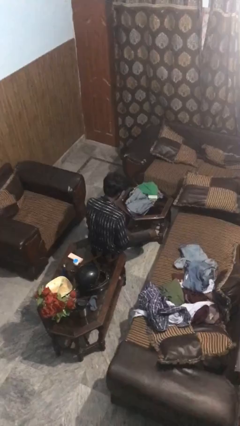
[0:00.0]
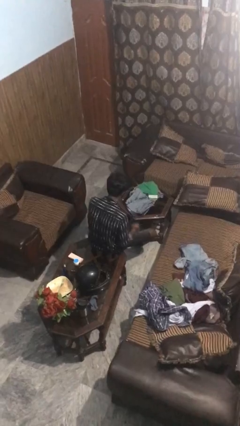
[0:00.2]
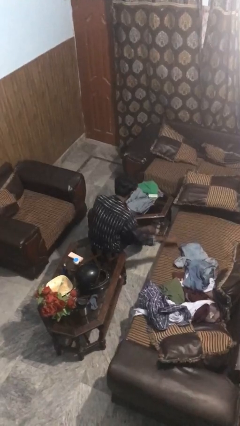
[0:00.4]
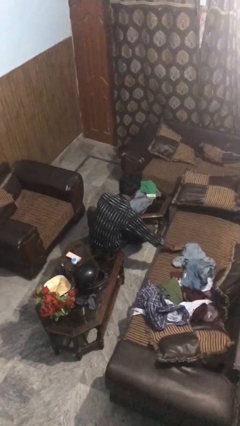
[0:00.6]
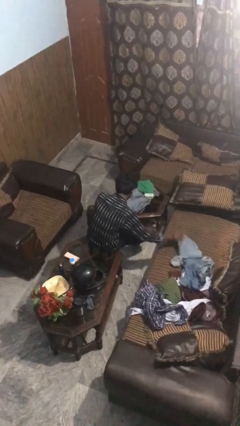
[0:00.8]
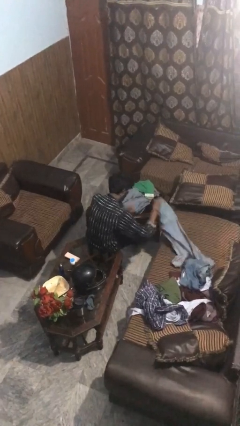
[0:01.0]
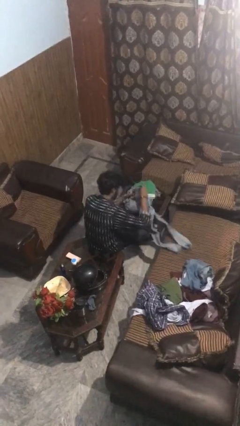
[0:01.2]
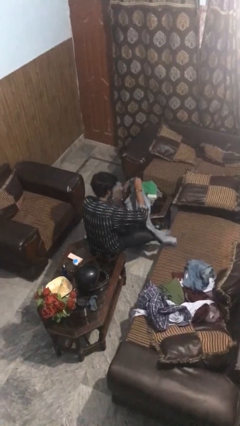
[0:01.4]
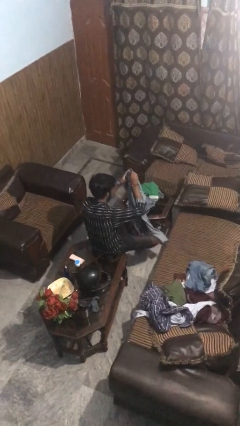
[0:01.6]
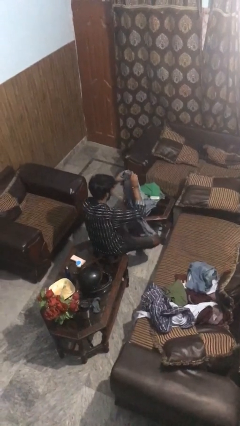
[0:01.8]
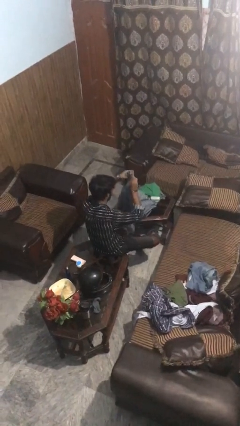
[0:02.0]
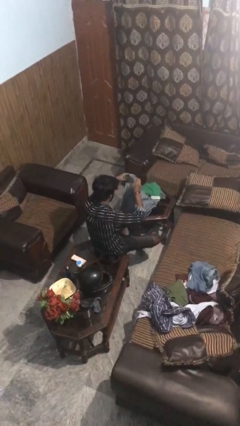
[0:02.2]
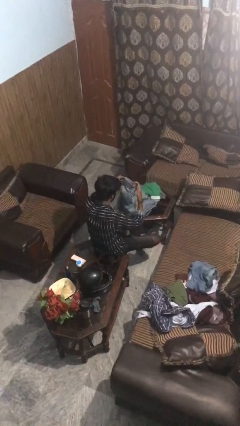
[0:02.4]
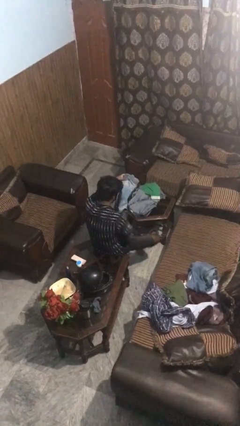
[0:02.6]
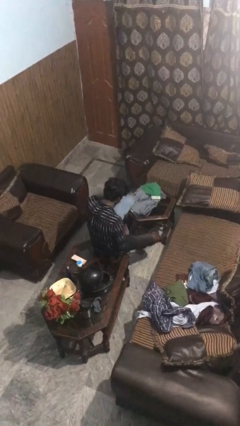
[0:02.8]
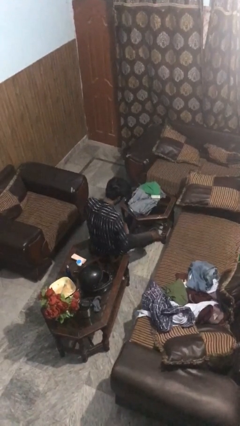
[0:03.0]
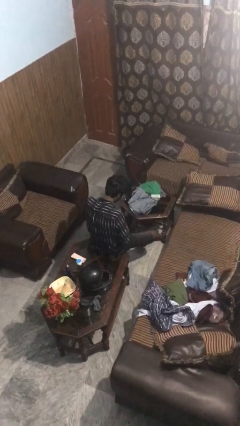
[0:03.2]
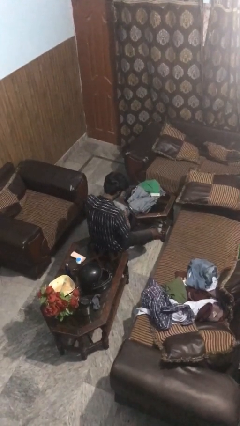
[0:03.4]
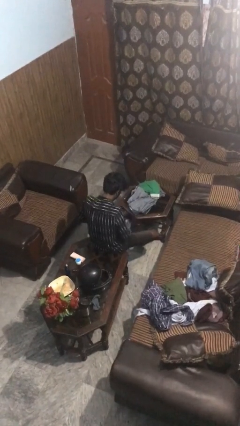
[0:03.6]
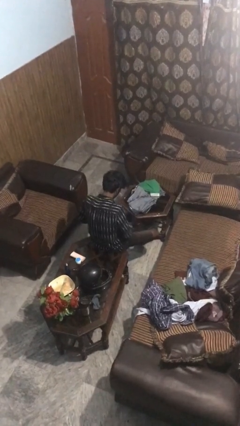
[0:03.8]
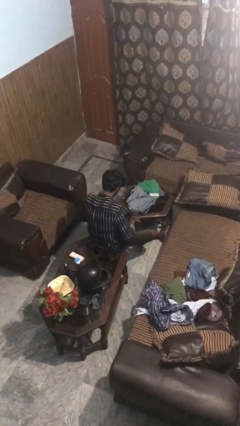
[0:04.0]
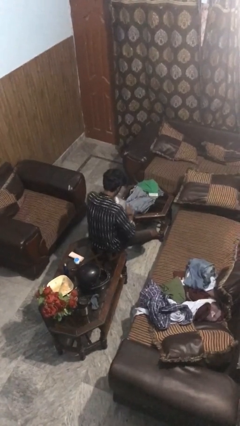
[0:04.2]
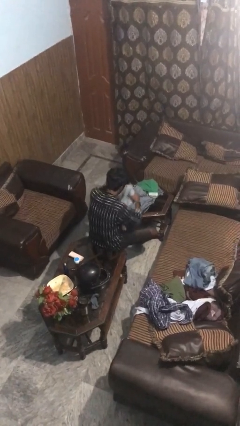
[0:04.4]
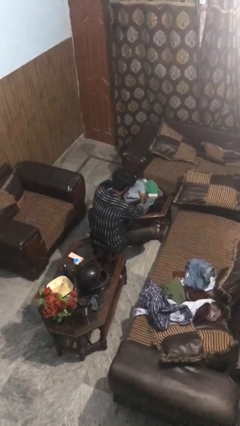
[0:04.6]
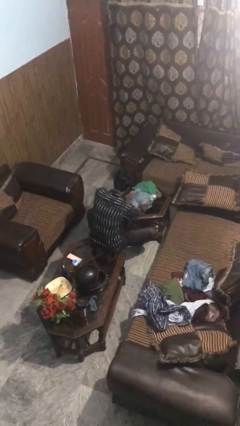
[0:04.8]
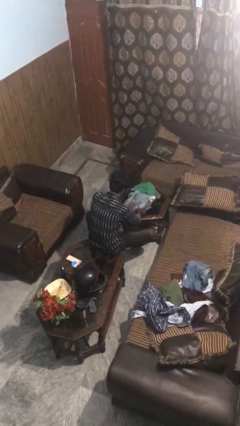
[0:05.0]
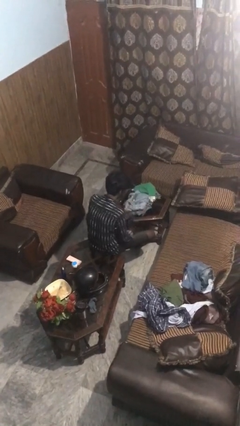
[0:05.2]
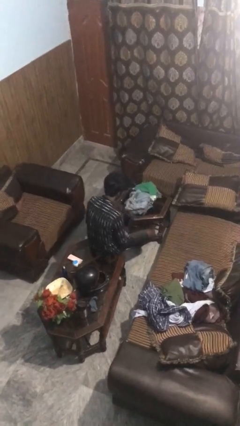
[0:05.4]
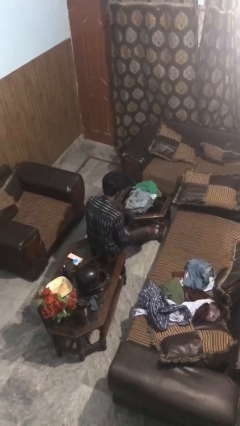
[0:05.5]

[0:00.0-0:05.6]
person folds pants

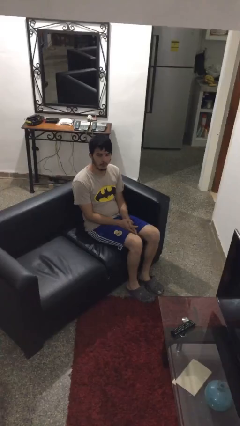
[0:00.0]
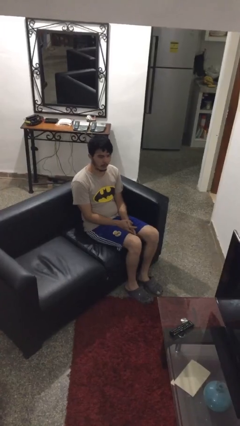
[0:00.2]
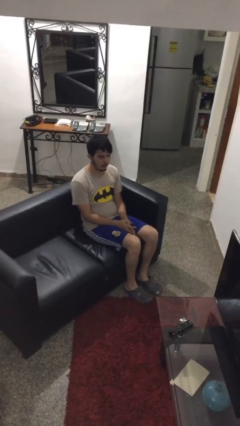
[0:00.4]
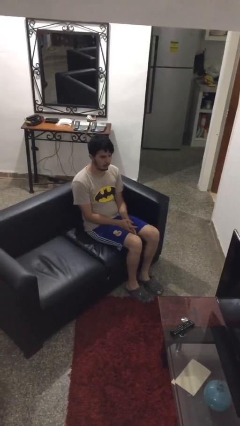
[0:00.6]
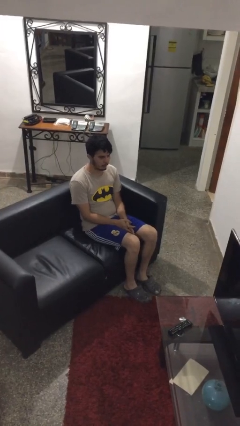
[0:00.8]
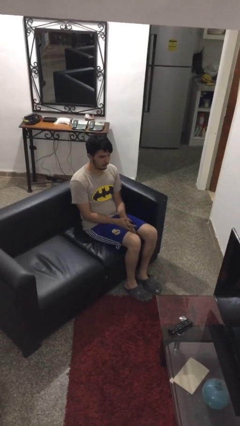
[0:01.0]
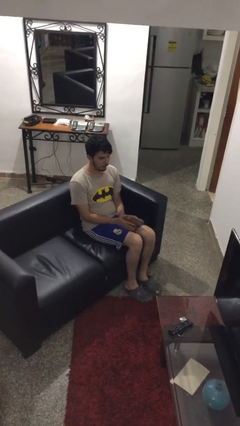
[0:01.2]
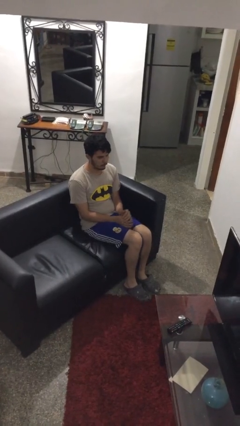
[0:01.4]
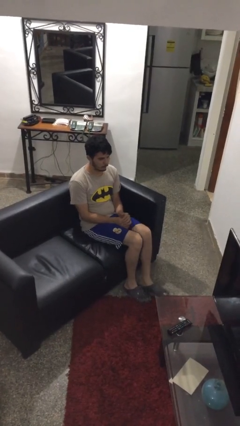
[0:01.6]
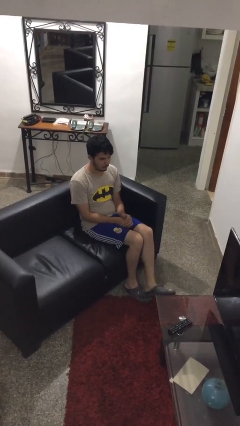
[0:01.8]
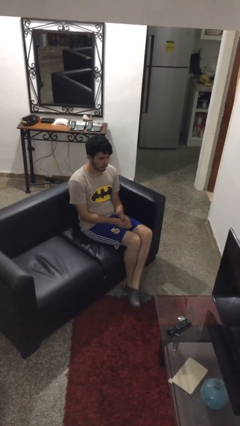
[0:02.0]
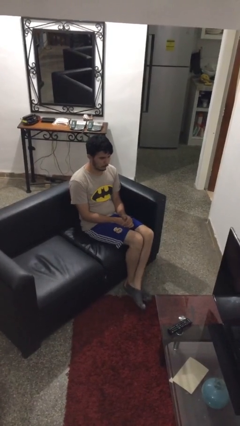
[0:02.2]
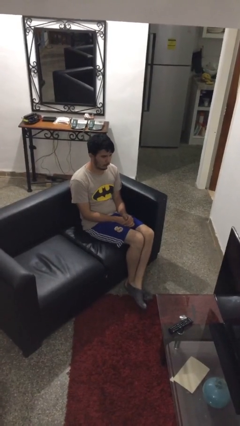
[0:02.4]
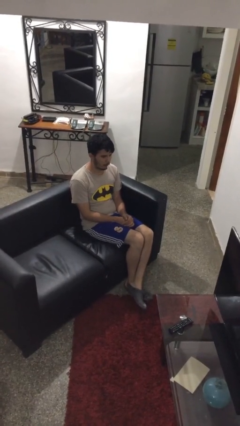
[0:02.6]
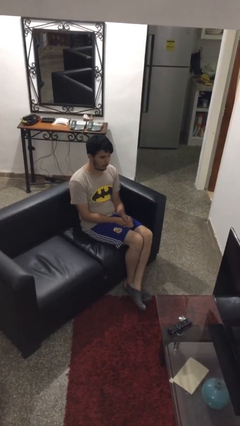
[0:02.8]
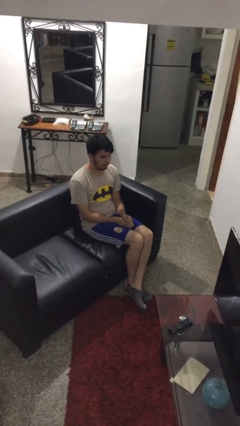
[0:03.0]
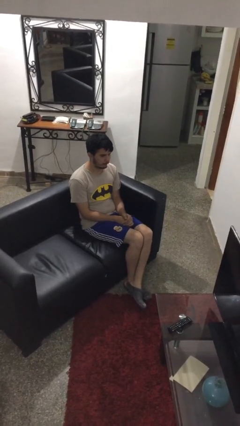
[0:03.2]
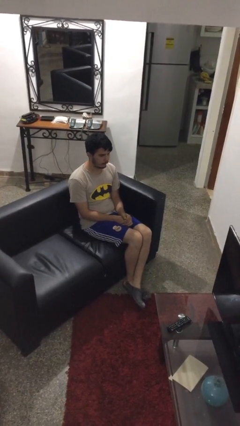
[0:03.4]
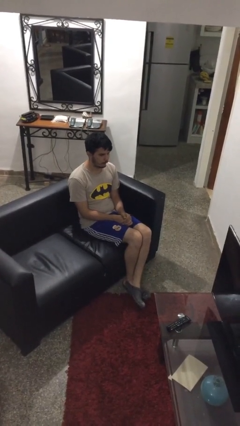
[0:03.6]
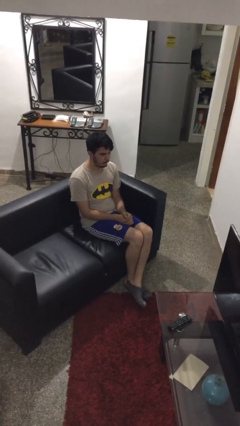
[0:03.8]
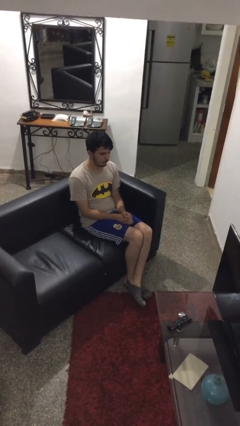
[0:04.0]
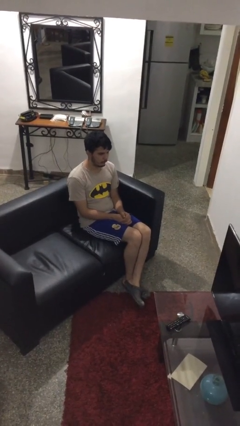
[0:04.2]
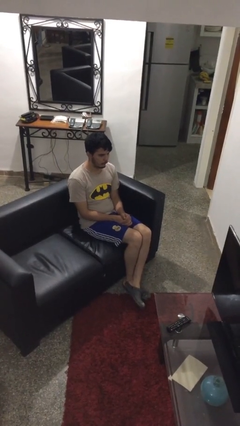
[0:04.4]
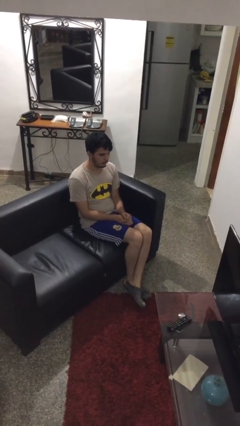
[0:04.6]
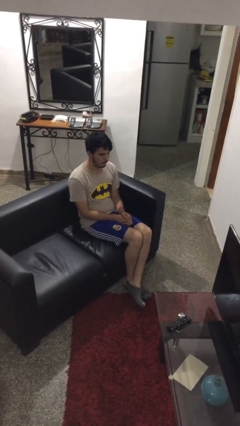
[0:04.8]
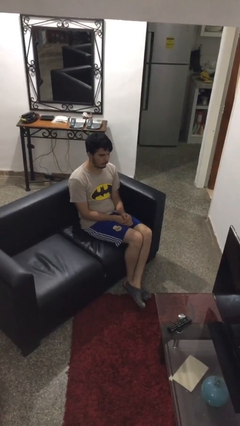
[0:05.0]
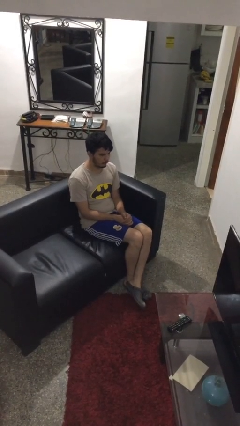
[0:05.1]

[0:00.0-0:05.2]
person crosses legs

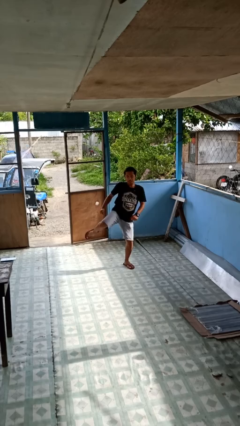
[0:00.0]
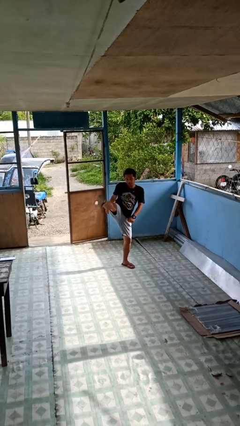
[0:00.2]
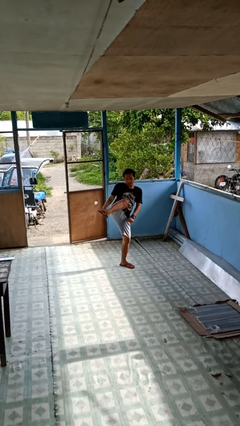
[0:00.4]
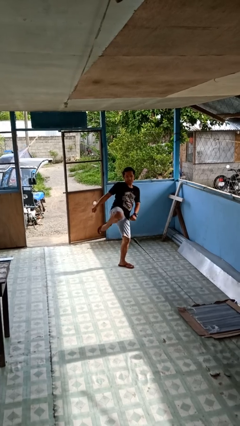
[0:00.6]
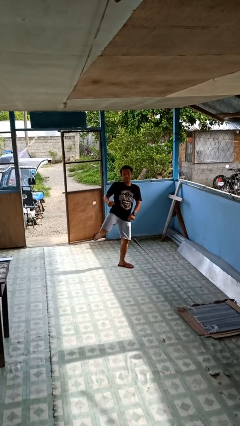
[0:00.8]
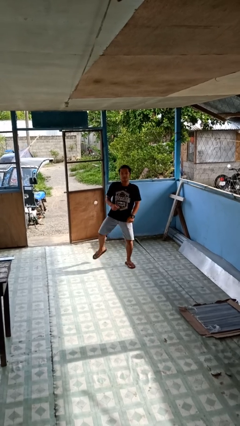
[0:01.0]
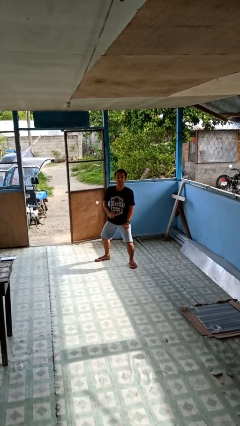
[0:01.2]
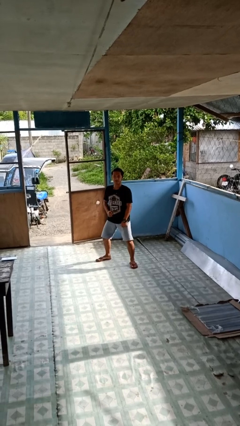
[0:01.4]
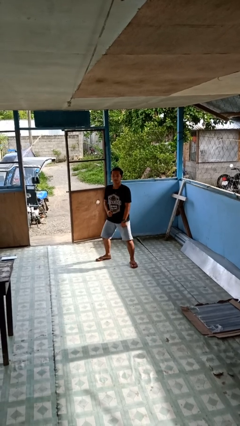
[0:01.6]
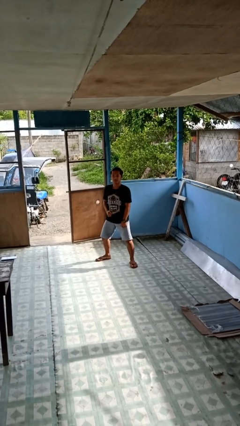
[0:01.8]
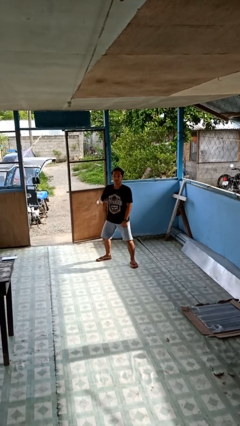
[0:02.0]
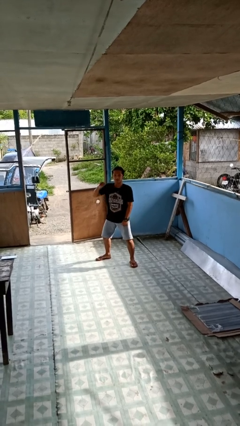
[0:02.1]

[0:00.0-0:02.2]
person karate kicks

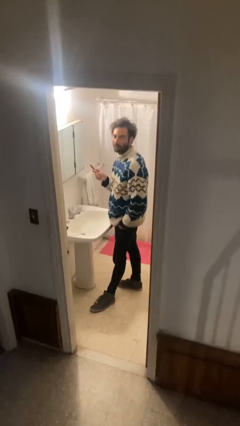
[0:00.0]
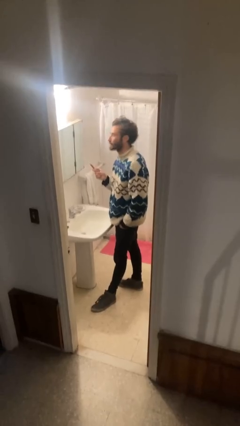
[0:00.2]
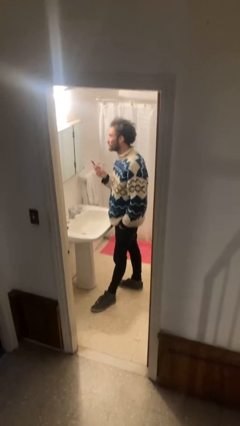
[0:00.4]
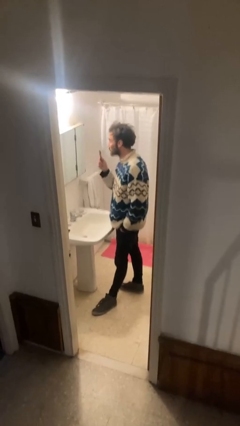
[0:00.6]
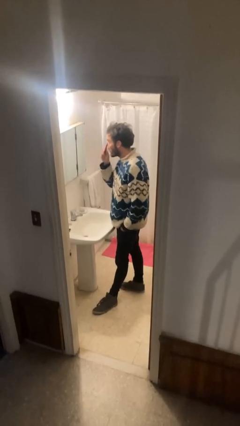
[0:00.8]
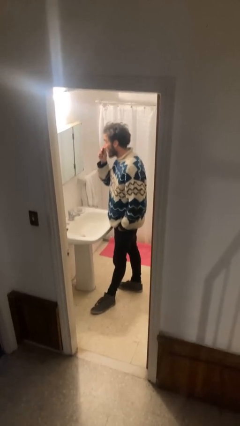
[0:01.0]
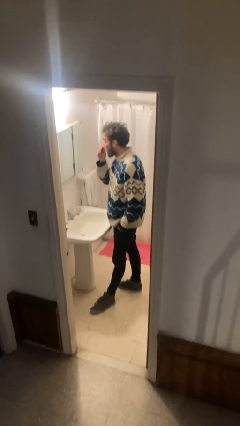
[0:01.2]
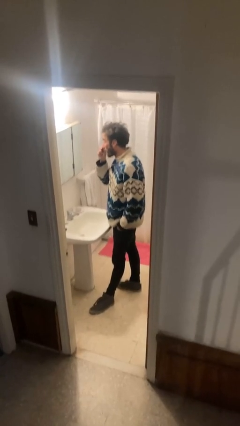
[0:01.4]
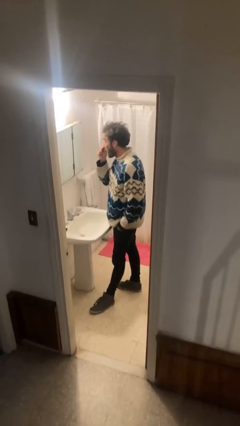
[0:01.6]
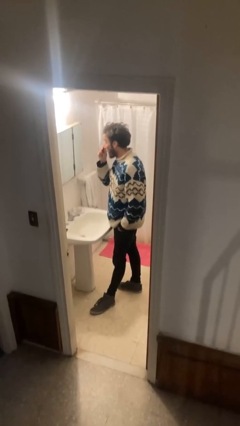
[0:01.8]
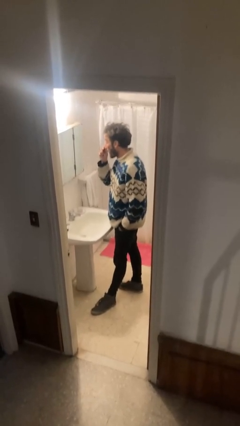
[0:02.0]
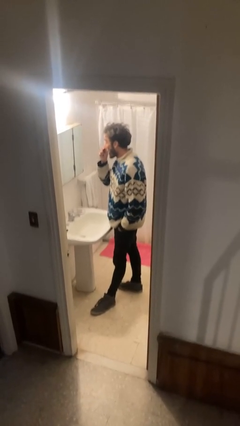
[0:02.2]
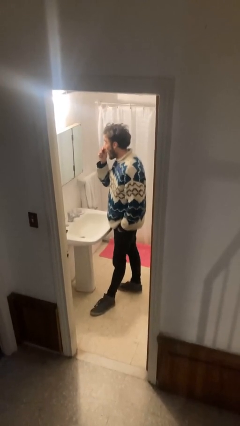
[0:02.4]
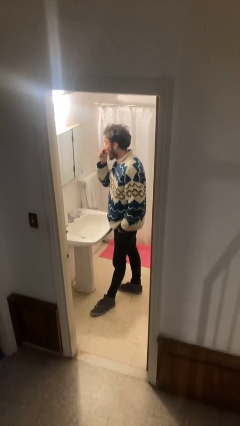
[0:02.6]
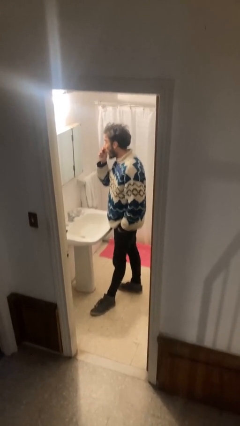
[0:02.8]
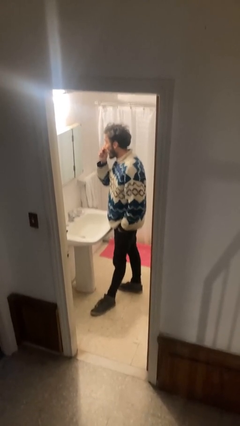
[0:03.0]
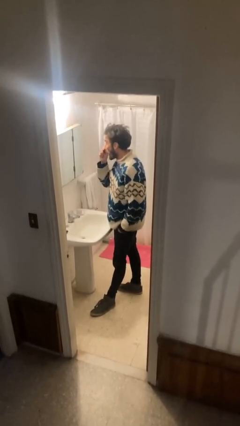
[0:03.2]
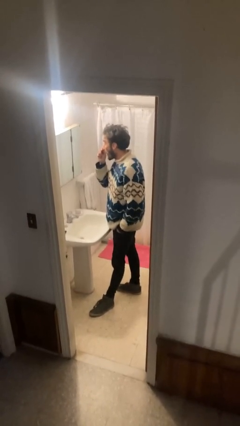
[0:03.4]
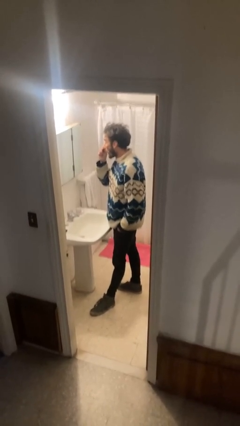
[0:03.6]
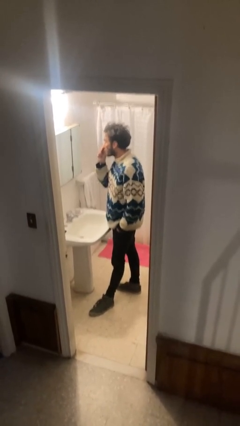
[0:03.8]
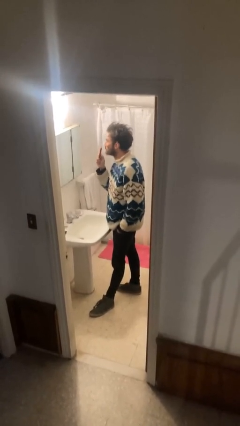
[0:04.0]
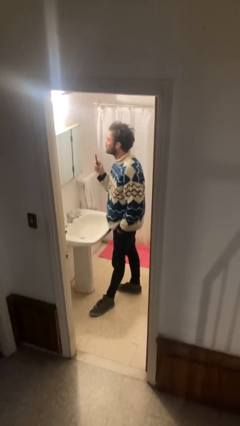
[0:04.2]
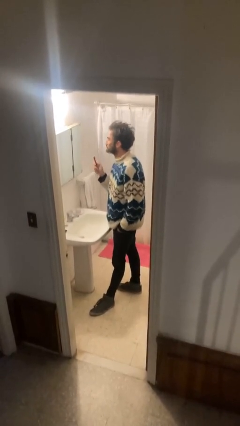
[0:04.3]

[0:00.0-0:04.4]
person applies eye makeup
